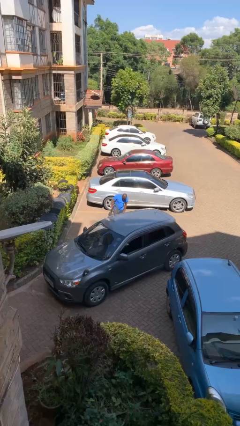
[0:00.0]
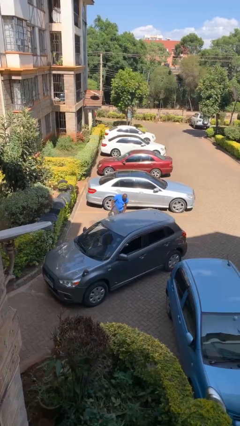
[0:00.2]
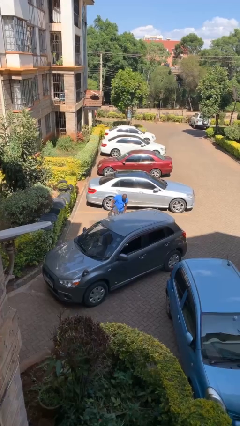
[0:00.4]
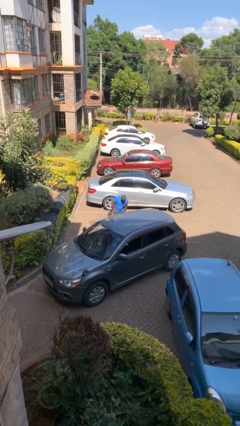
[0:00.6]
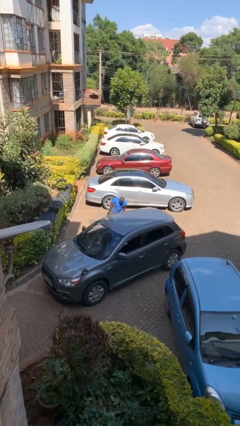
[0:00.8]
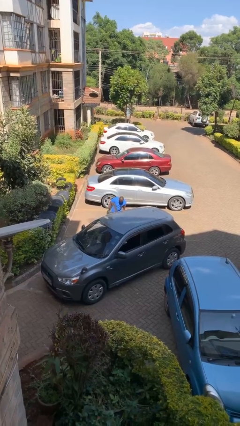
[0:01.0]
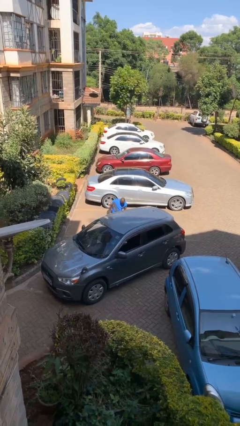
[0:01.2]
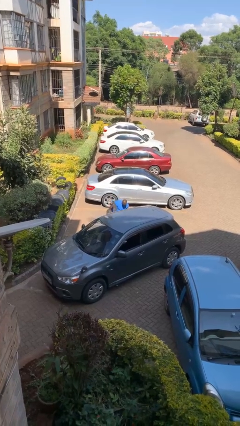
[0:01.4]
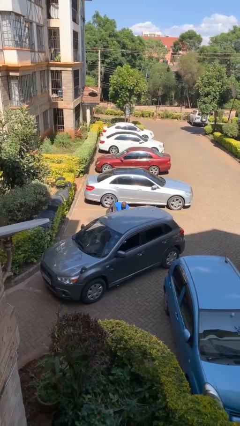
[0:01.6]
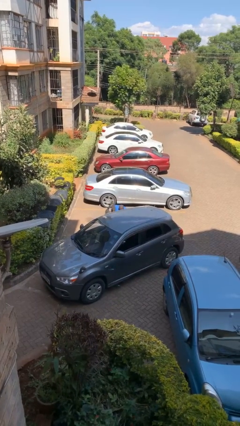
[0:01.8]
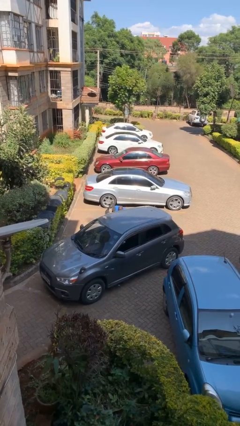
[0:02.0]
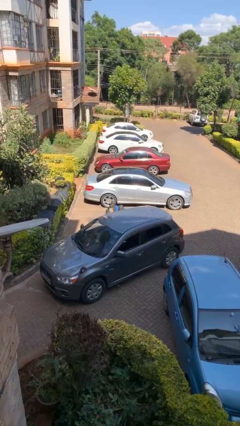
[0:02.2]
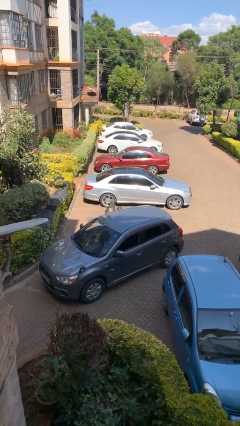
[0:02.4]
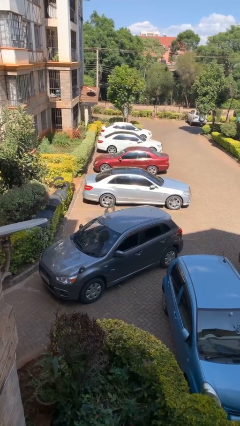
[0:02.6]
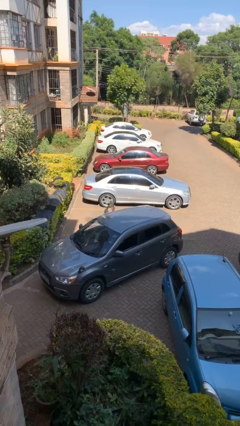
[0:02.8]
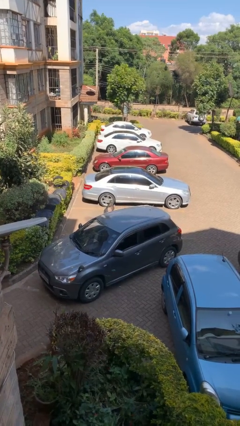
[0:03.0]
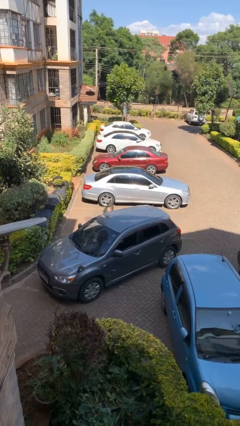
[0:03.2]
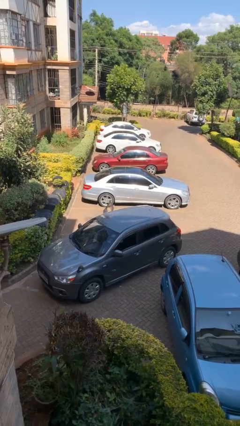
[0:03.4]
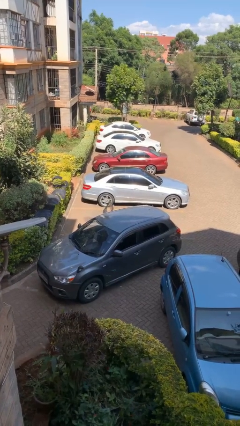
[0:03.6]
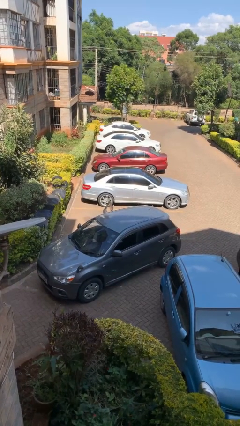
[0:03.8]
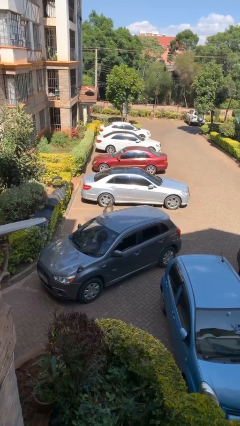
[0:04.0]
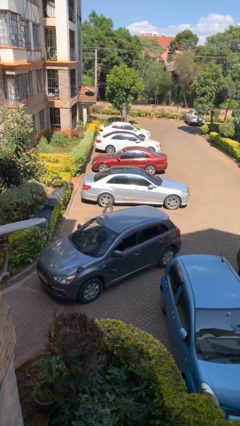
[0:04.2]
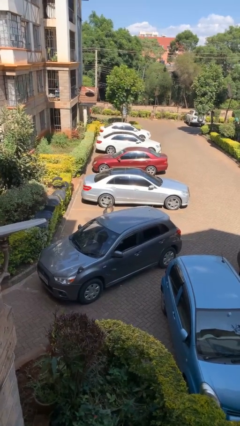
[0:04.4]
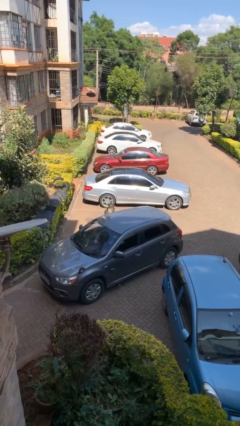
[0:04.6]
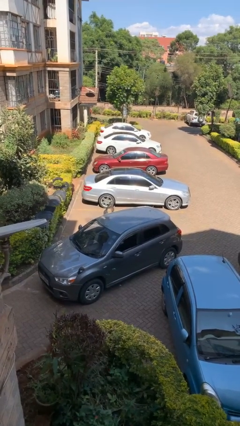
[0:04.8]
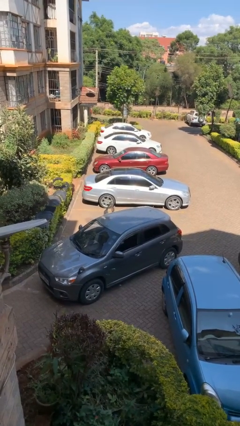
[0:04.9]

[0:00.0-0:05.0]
person enters car

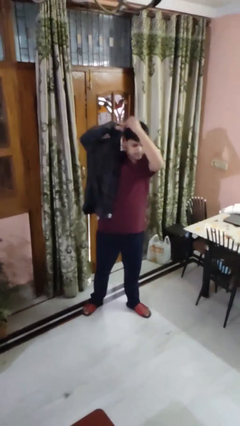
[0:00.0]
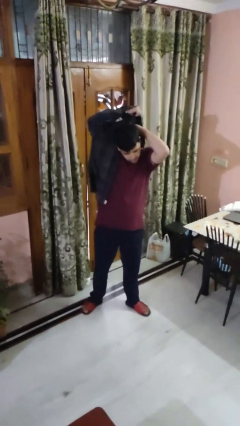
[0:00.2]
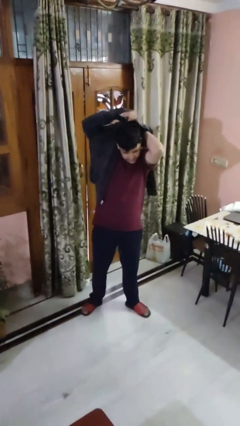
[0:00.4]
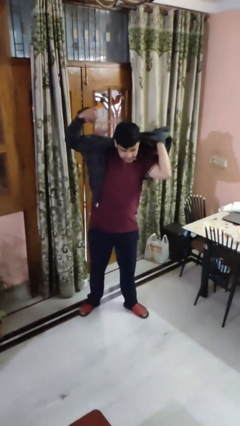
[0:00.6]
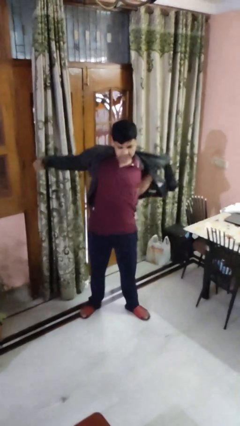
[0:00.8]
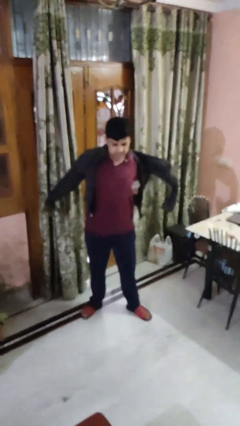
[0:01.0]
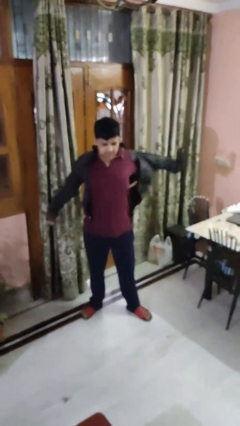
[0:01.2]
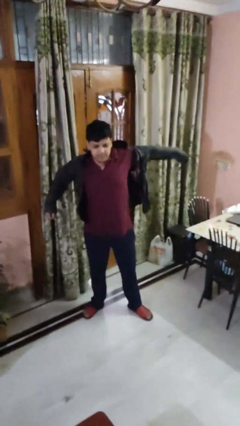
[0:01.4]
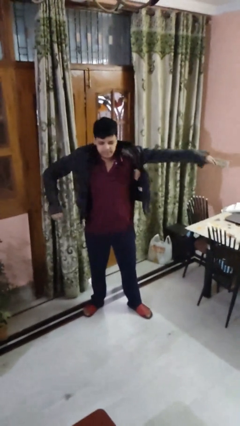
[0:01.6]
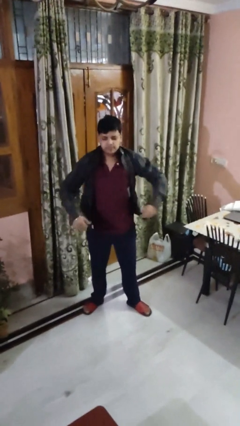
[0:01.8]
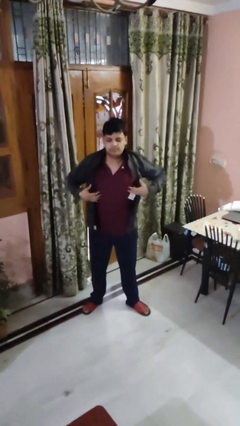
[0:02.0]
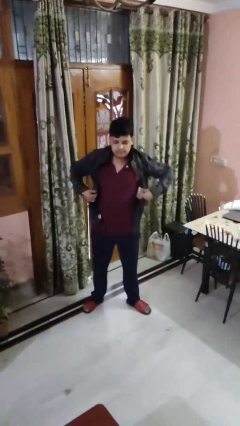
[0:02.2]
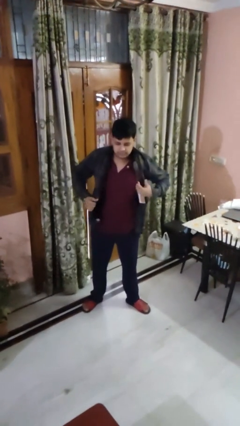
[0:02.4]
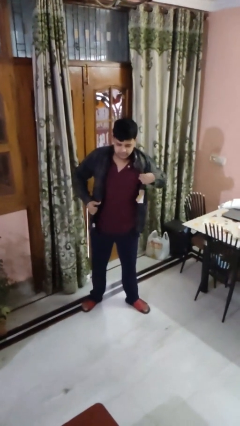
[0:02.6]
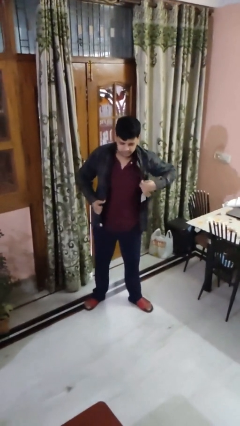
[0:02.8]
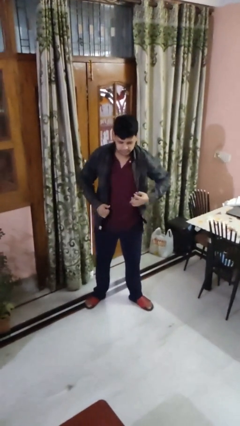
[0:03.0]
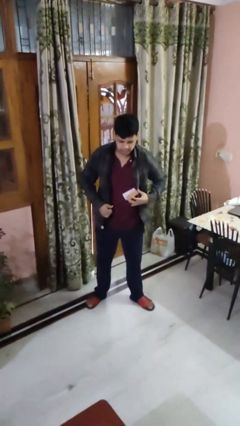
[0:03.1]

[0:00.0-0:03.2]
person puts on shirt

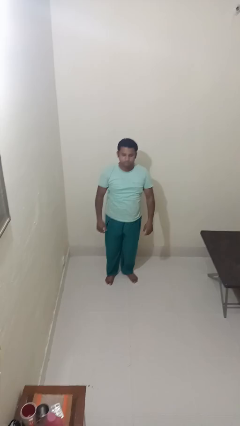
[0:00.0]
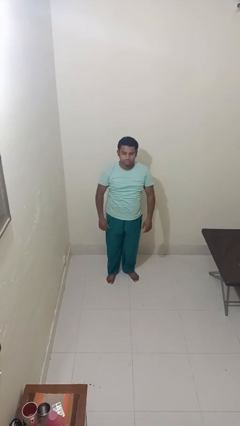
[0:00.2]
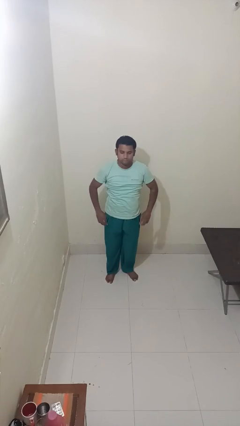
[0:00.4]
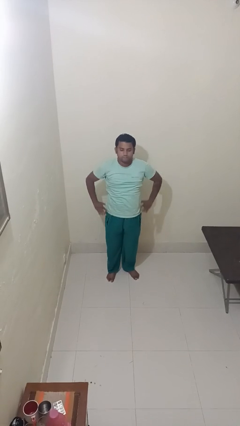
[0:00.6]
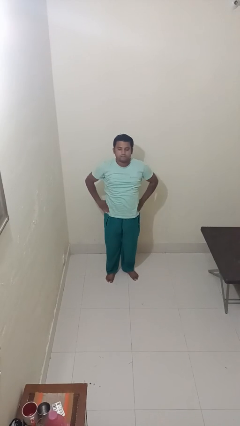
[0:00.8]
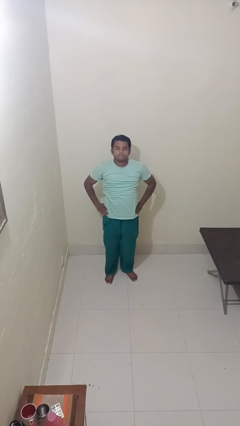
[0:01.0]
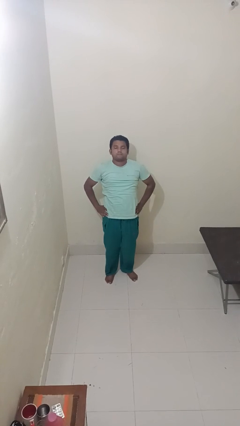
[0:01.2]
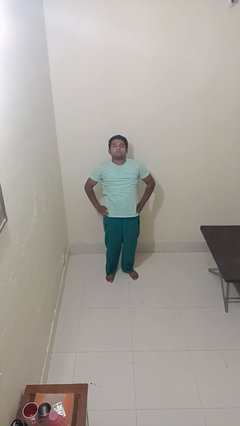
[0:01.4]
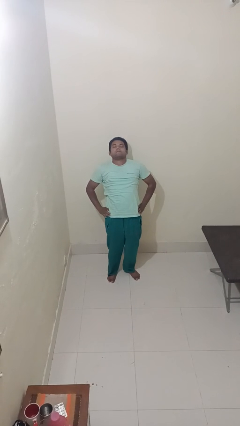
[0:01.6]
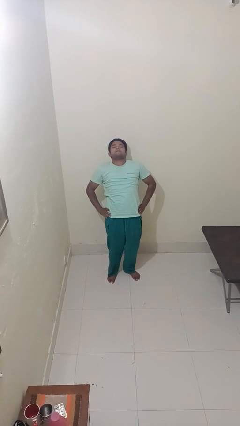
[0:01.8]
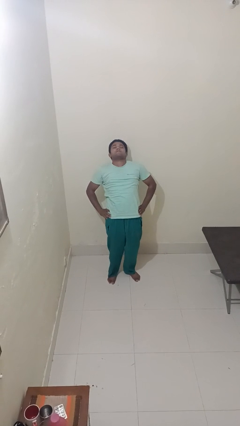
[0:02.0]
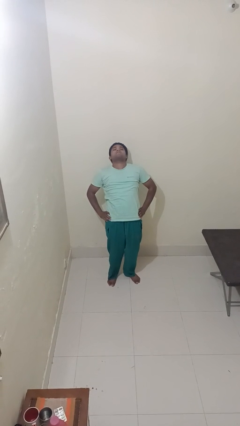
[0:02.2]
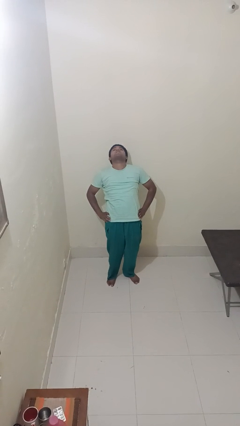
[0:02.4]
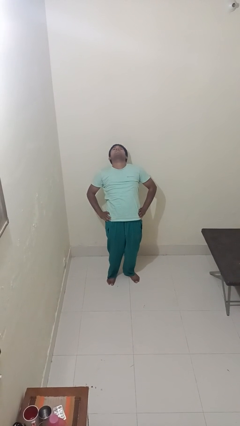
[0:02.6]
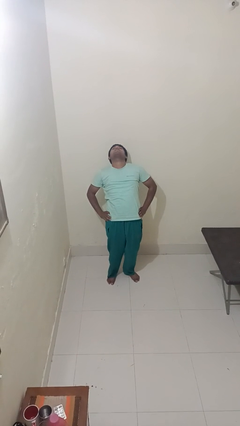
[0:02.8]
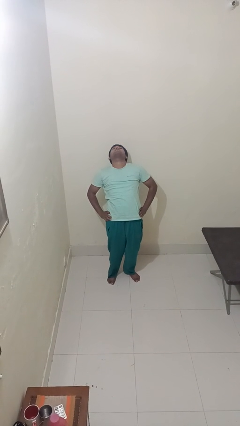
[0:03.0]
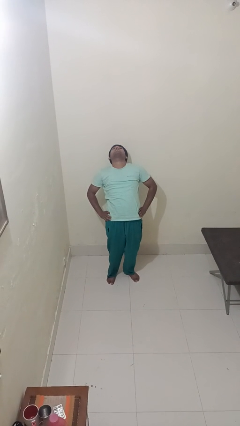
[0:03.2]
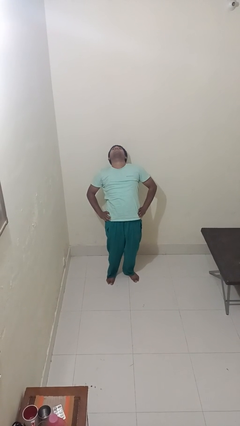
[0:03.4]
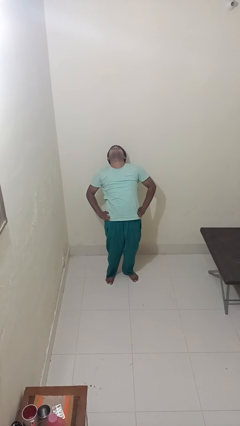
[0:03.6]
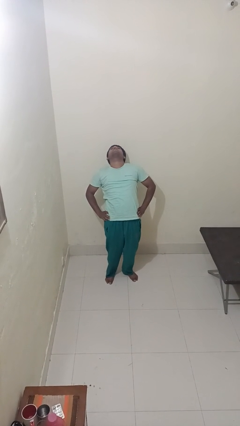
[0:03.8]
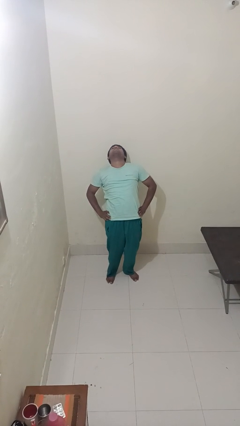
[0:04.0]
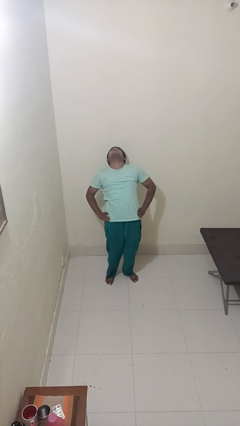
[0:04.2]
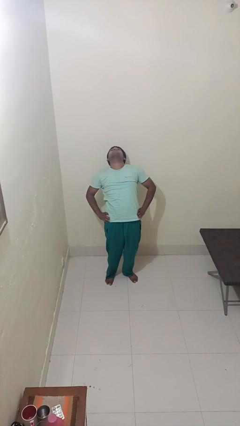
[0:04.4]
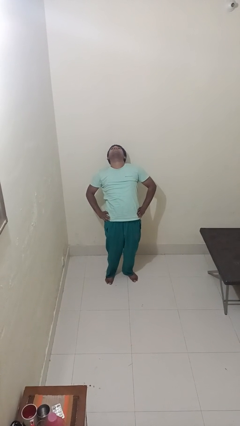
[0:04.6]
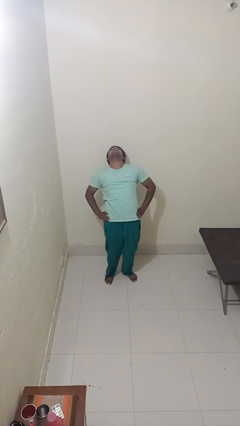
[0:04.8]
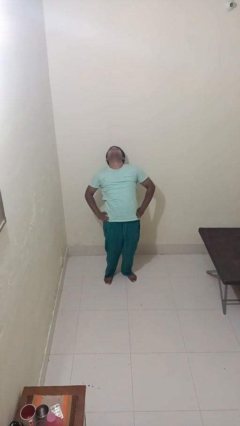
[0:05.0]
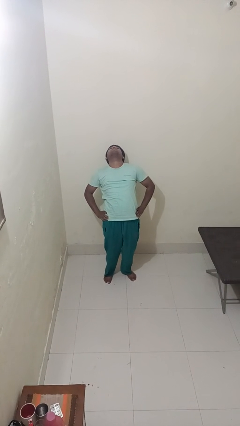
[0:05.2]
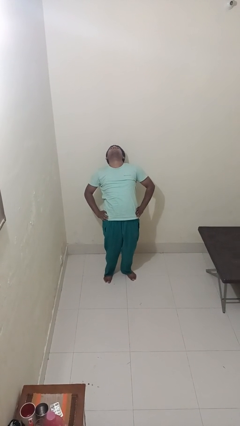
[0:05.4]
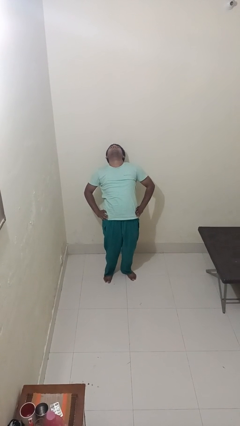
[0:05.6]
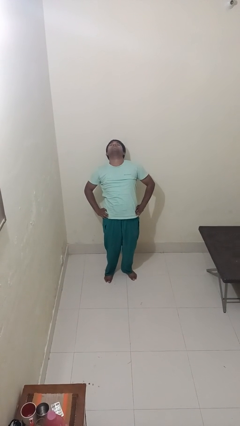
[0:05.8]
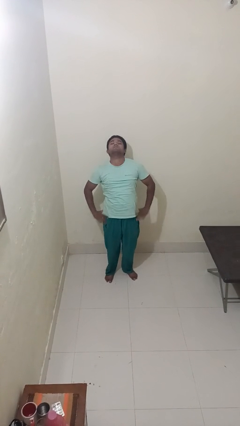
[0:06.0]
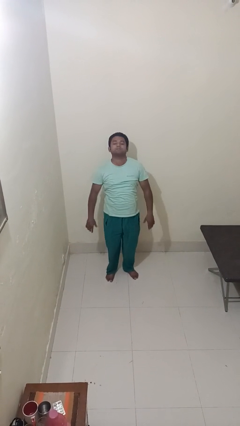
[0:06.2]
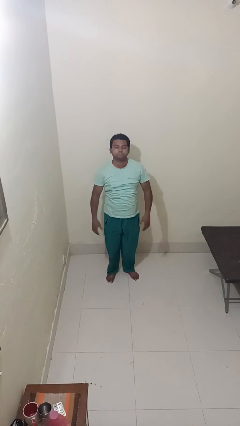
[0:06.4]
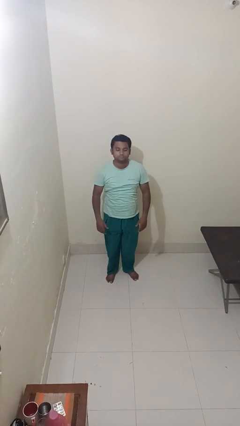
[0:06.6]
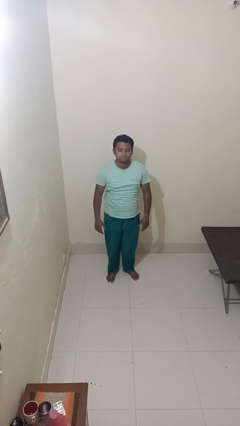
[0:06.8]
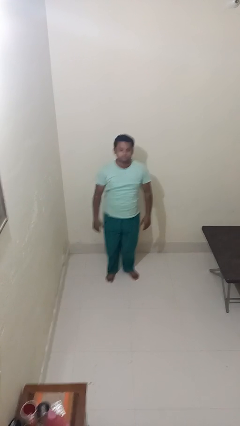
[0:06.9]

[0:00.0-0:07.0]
person stretches back

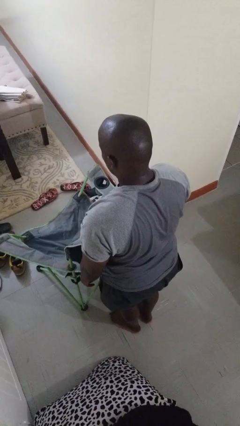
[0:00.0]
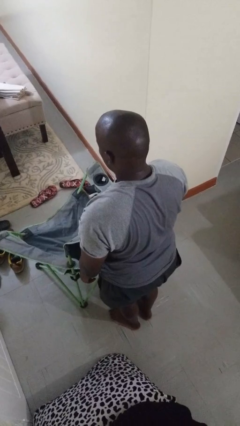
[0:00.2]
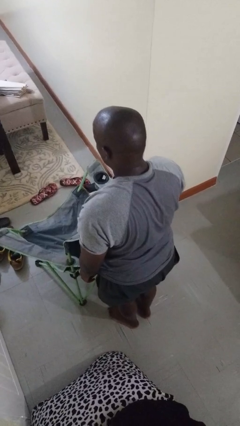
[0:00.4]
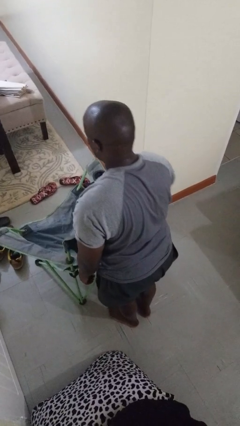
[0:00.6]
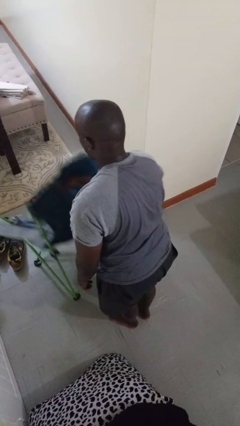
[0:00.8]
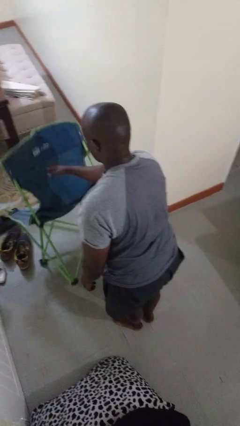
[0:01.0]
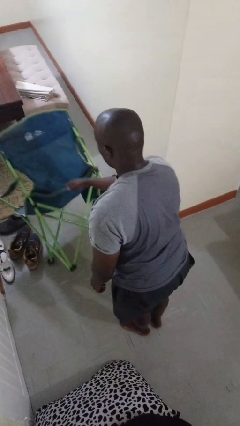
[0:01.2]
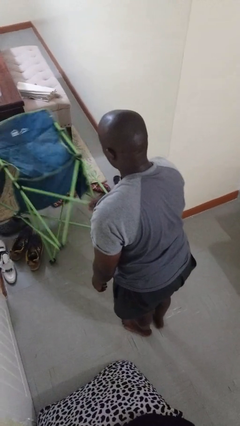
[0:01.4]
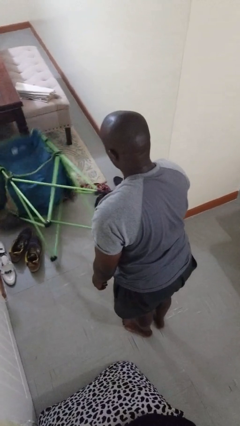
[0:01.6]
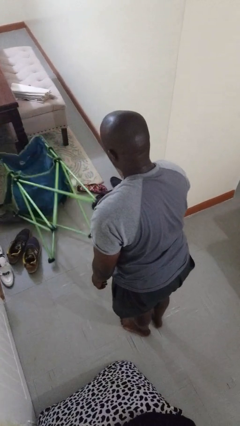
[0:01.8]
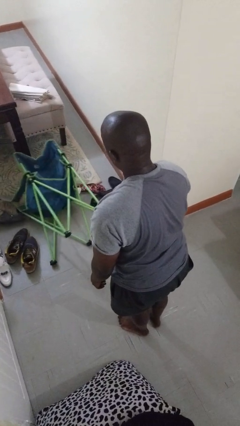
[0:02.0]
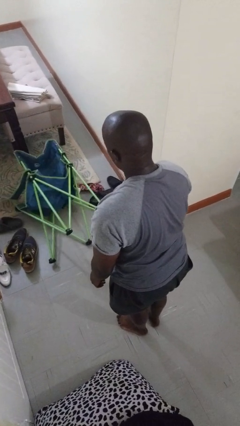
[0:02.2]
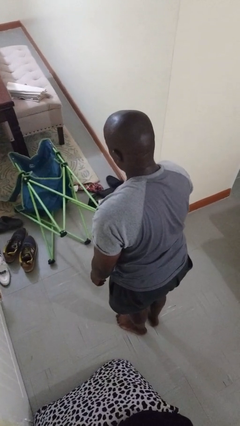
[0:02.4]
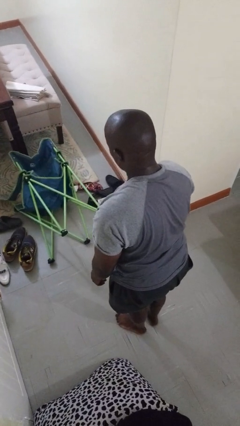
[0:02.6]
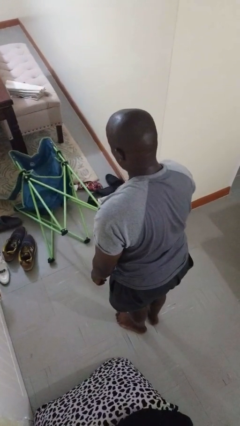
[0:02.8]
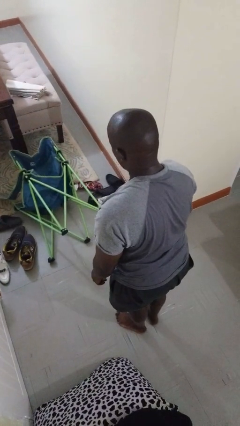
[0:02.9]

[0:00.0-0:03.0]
person knocks over furniture
